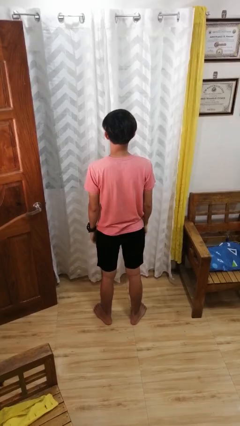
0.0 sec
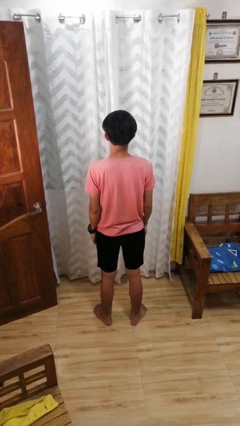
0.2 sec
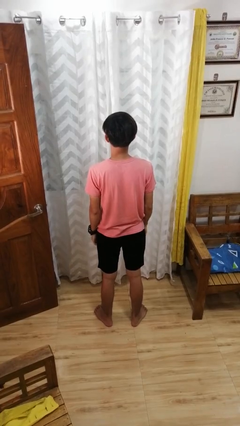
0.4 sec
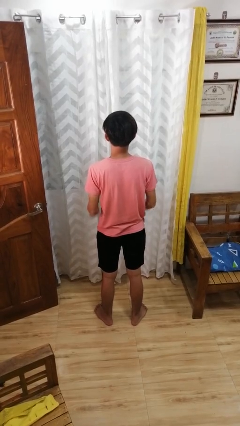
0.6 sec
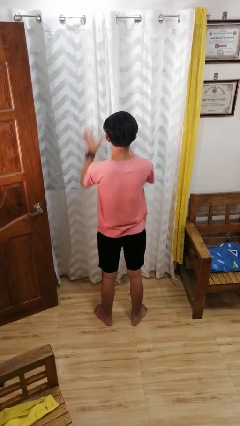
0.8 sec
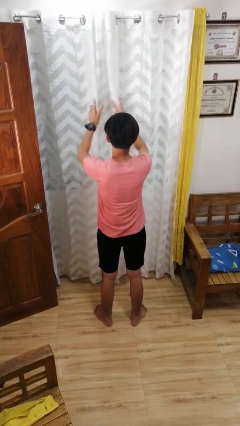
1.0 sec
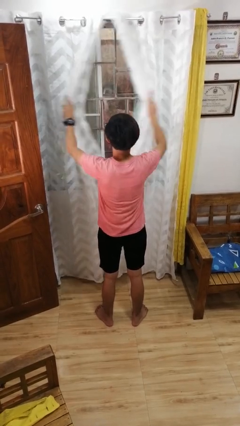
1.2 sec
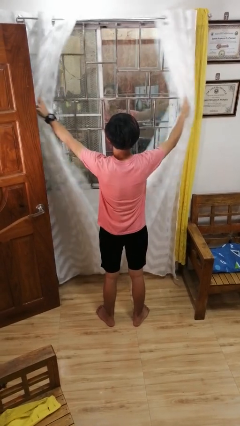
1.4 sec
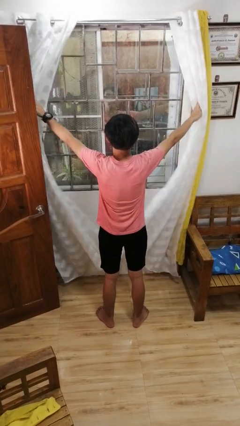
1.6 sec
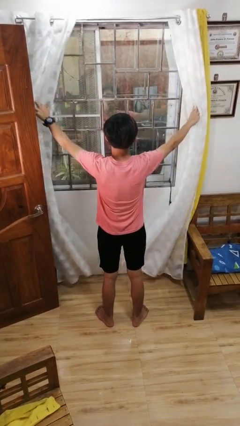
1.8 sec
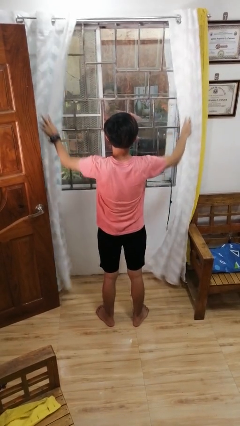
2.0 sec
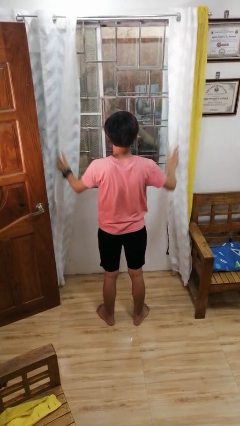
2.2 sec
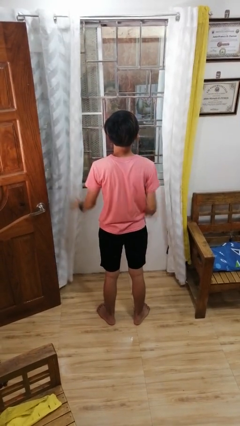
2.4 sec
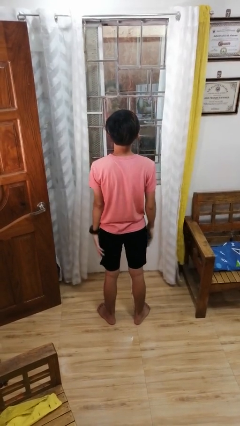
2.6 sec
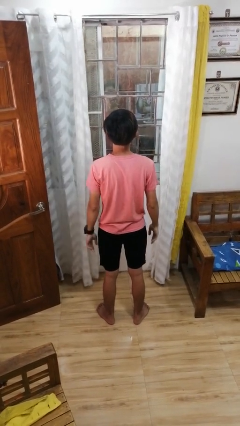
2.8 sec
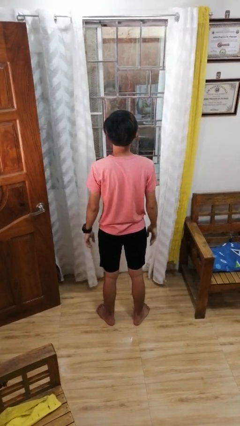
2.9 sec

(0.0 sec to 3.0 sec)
person opens curtains

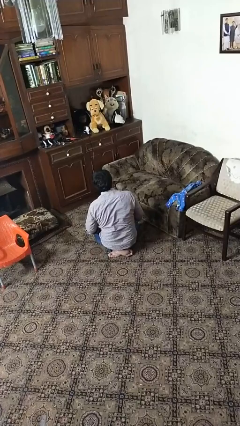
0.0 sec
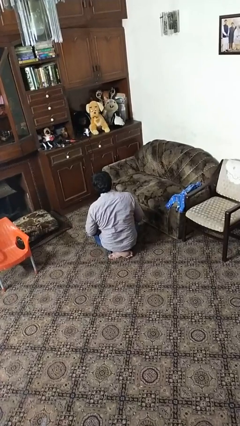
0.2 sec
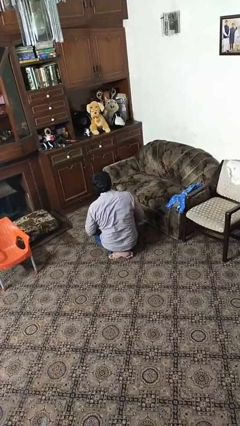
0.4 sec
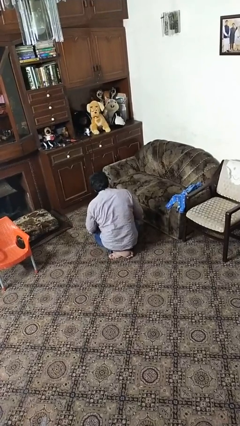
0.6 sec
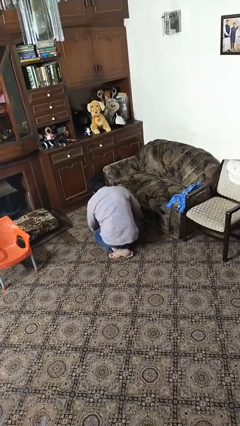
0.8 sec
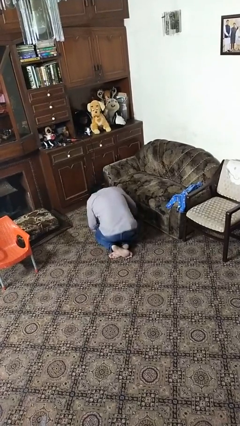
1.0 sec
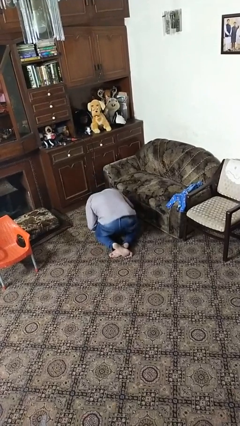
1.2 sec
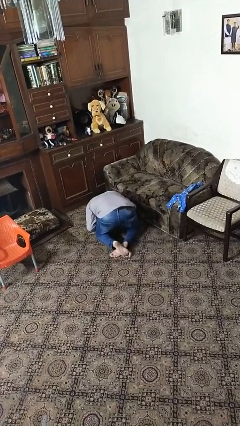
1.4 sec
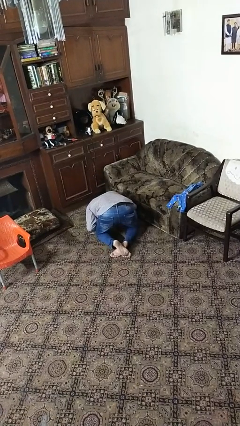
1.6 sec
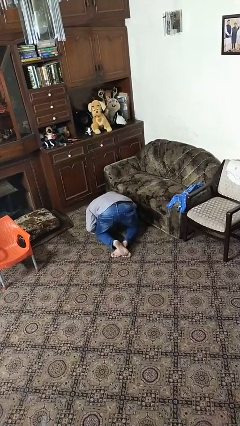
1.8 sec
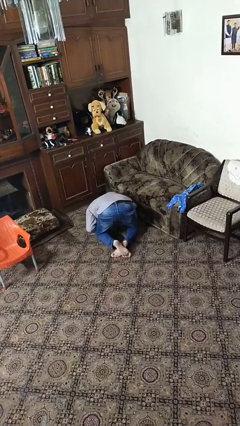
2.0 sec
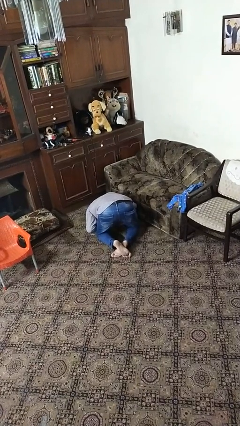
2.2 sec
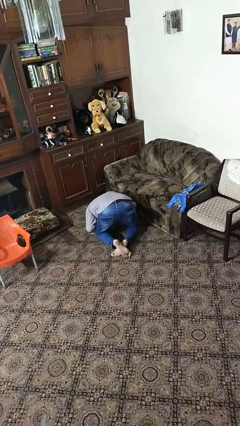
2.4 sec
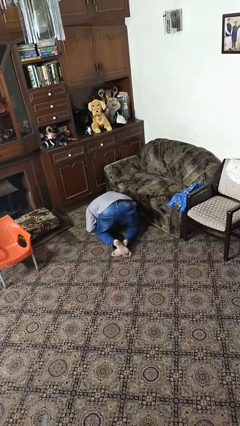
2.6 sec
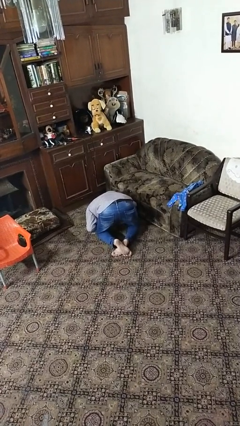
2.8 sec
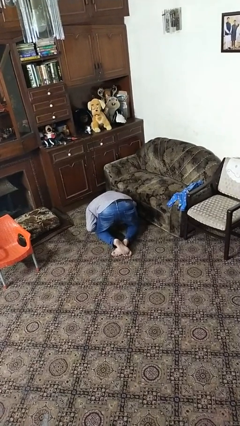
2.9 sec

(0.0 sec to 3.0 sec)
person searches under couch

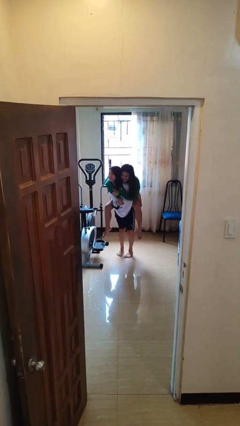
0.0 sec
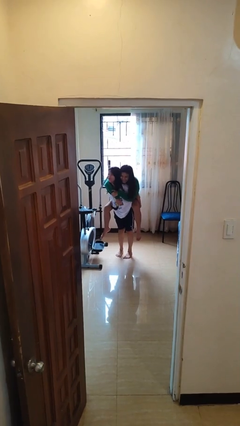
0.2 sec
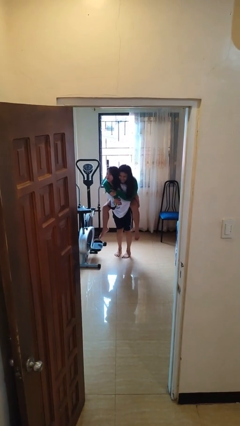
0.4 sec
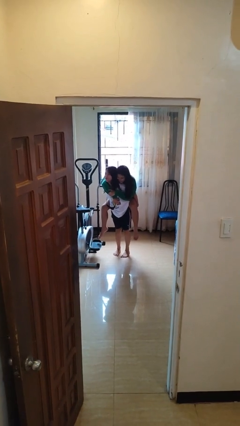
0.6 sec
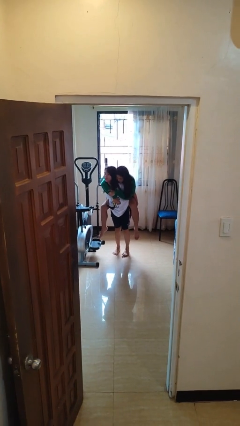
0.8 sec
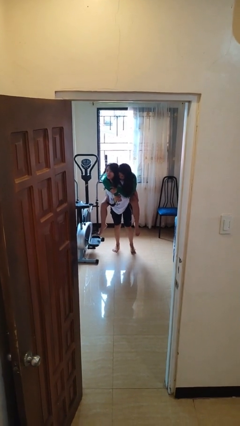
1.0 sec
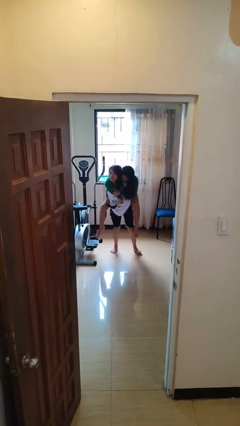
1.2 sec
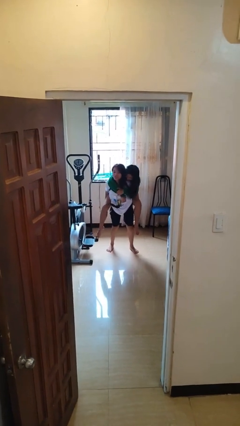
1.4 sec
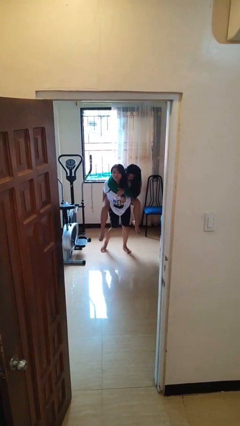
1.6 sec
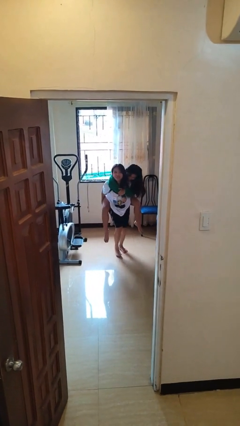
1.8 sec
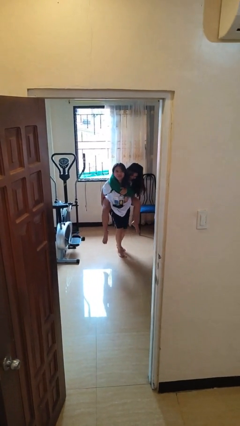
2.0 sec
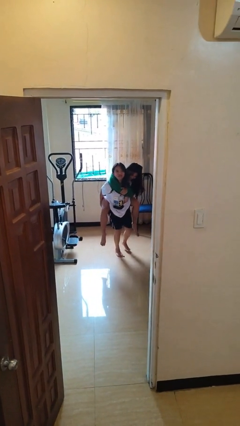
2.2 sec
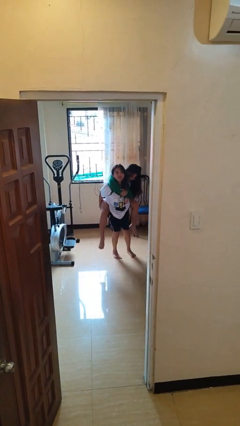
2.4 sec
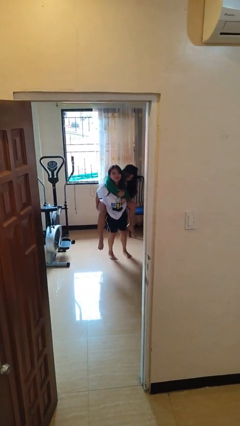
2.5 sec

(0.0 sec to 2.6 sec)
person carries person on back

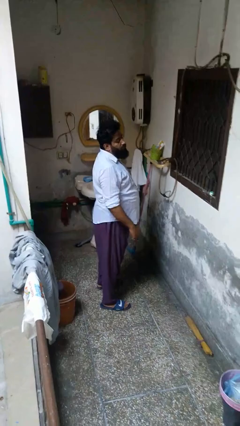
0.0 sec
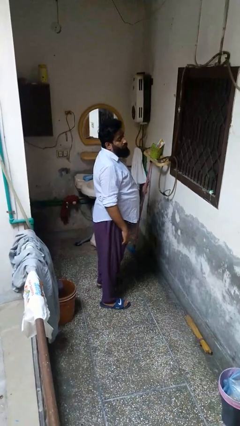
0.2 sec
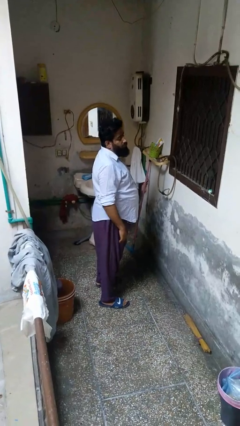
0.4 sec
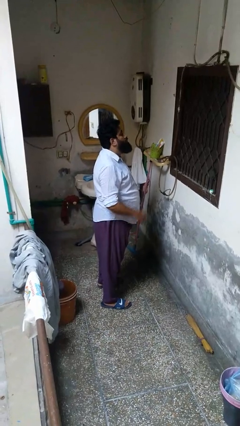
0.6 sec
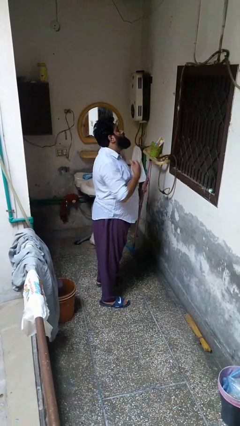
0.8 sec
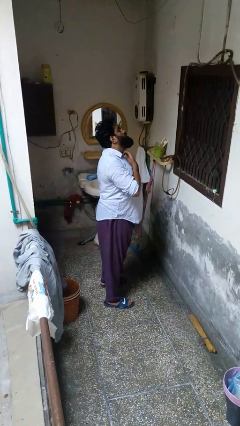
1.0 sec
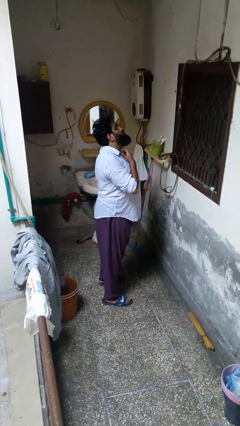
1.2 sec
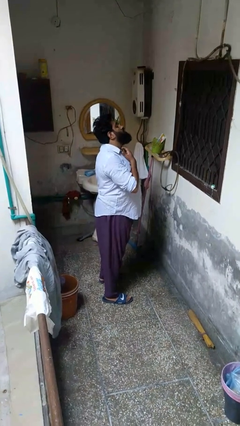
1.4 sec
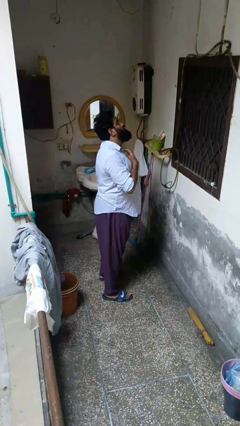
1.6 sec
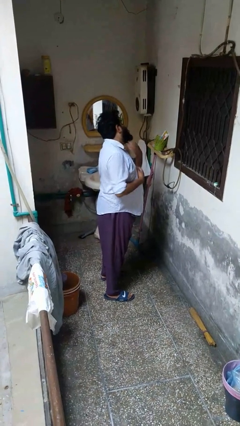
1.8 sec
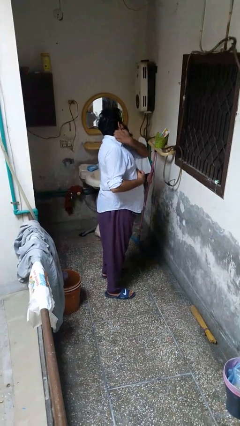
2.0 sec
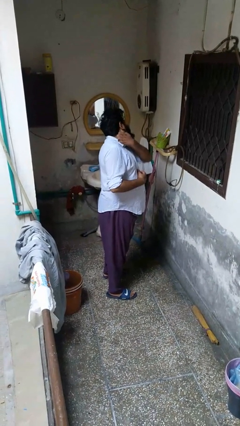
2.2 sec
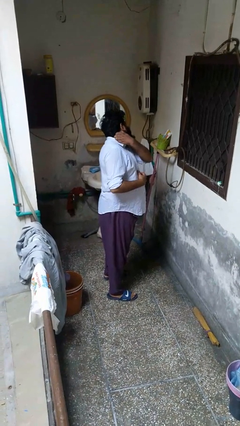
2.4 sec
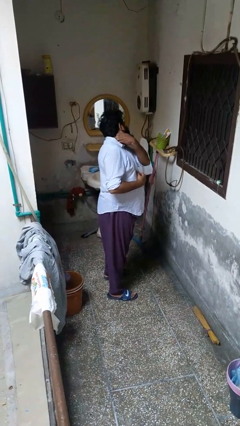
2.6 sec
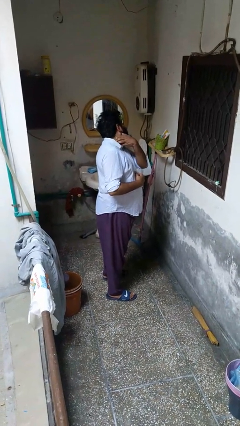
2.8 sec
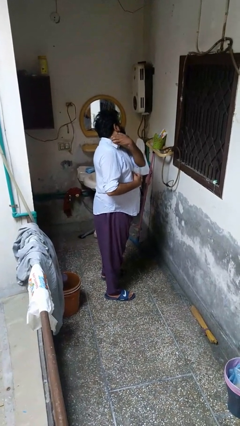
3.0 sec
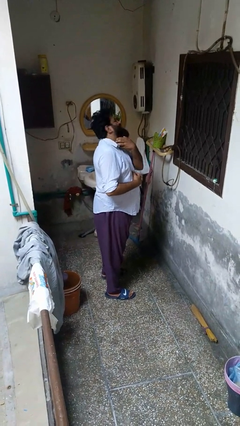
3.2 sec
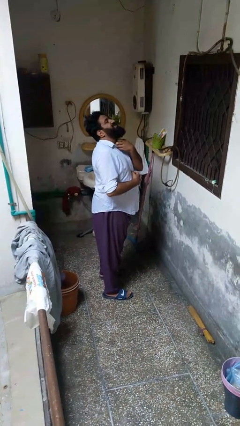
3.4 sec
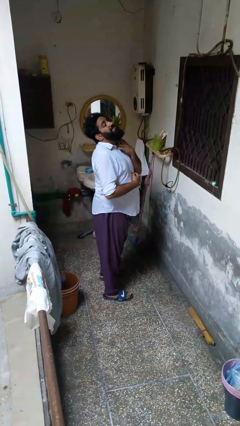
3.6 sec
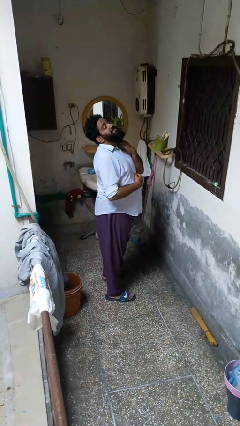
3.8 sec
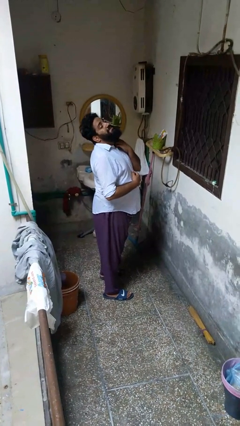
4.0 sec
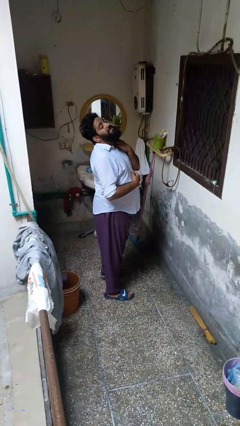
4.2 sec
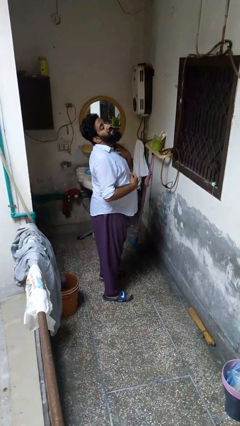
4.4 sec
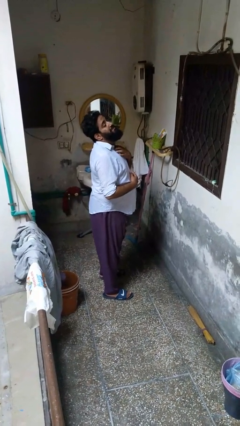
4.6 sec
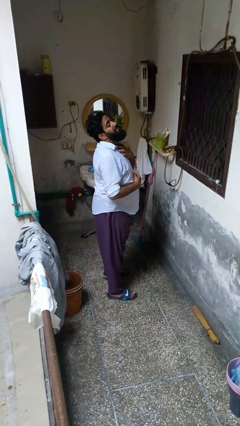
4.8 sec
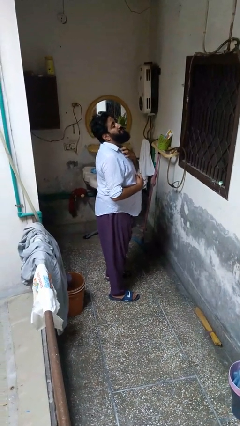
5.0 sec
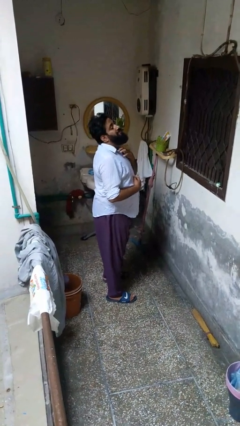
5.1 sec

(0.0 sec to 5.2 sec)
person rubs neck

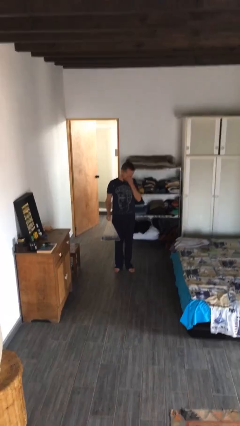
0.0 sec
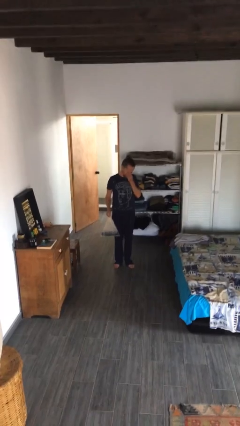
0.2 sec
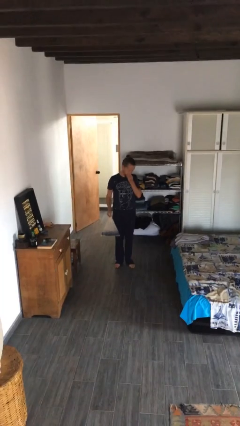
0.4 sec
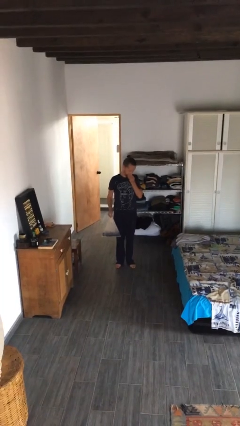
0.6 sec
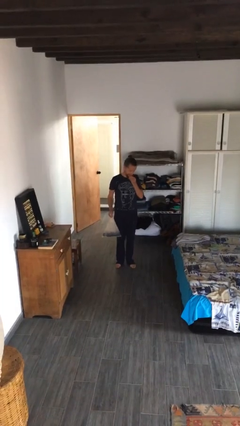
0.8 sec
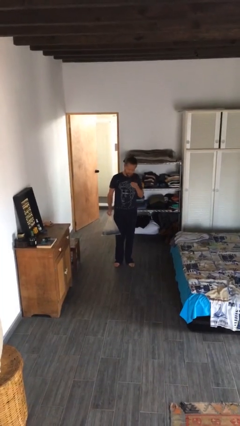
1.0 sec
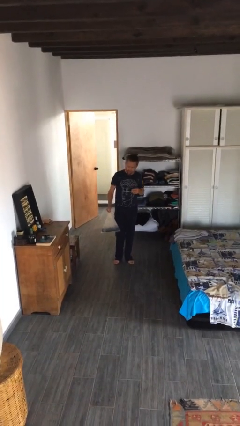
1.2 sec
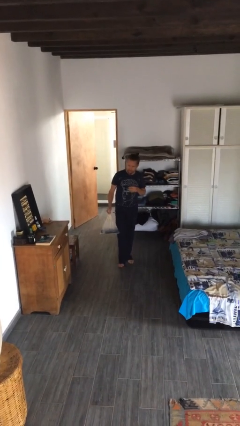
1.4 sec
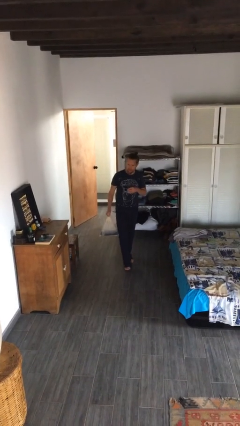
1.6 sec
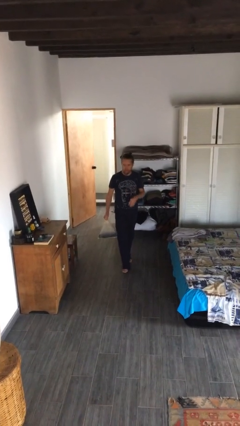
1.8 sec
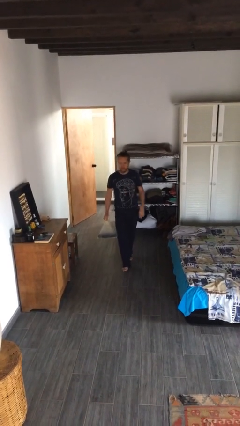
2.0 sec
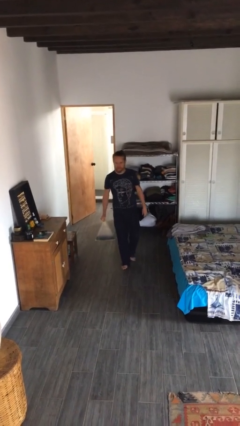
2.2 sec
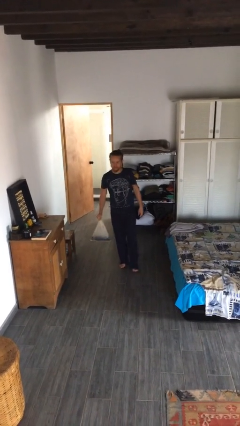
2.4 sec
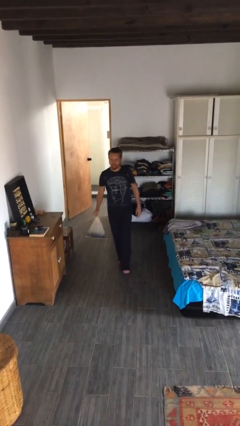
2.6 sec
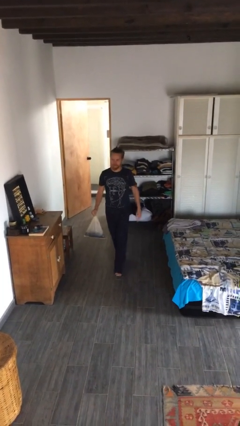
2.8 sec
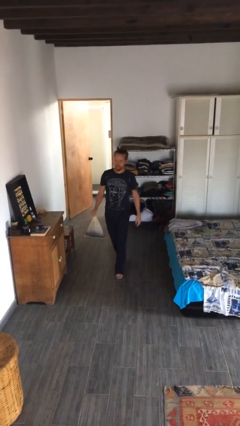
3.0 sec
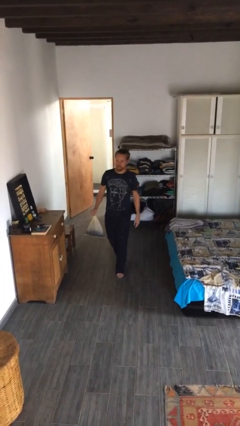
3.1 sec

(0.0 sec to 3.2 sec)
person carries groceries

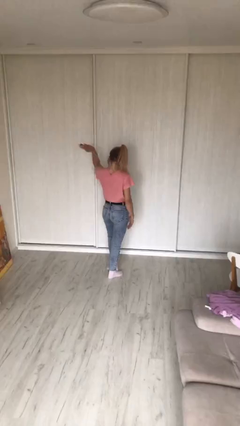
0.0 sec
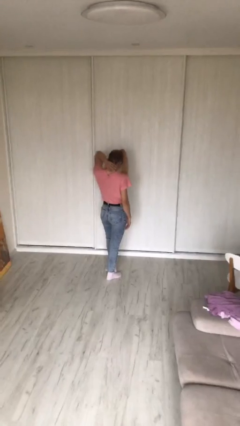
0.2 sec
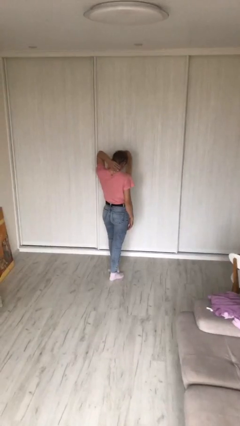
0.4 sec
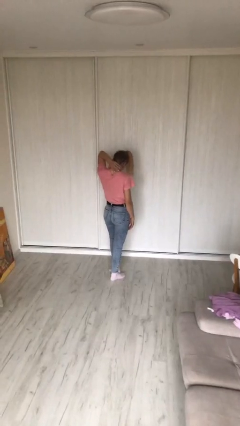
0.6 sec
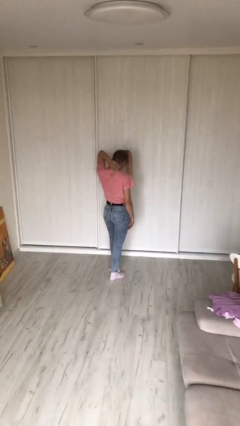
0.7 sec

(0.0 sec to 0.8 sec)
person swats bug
